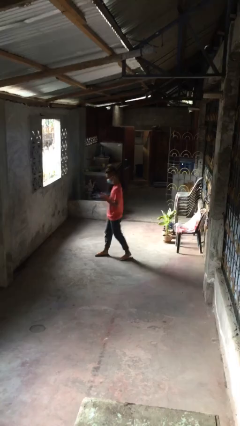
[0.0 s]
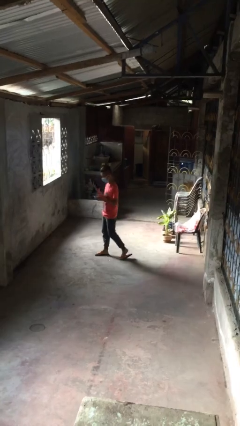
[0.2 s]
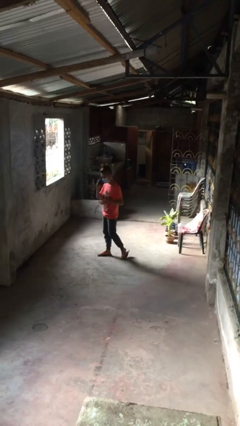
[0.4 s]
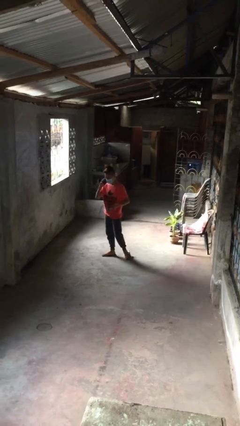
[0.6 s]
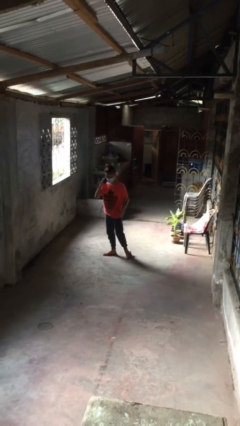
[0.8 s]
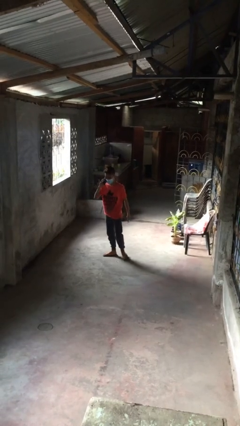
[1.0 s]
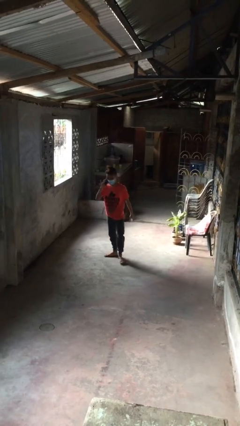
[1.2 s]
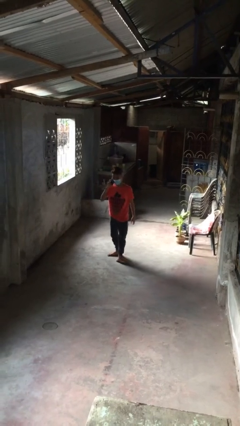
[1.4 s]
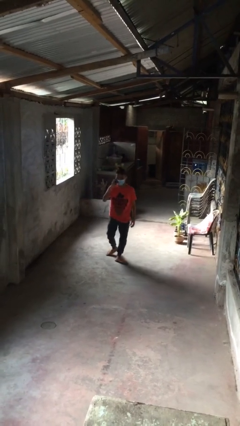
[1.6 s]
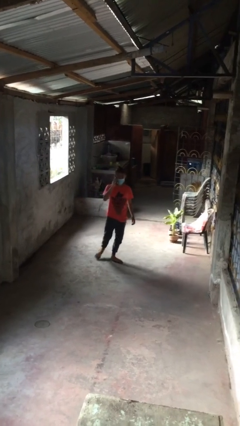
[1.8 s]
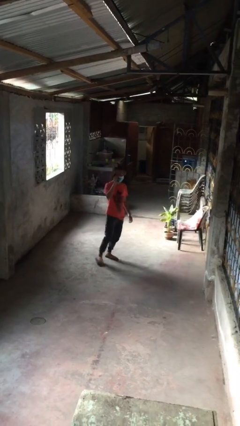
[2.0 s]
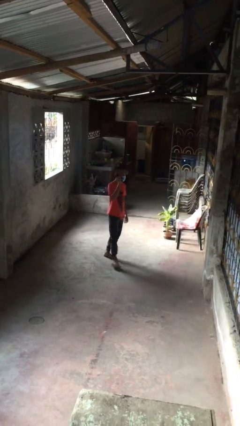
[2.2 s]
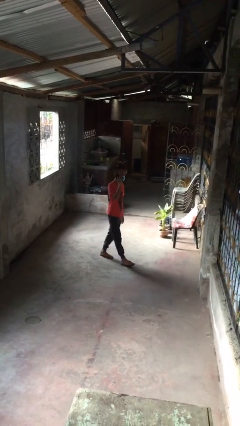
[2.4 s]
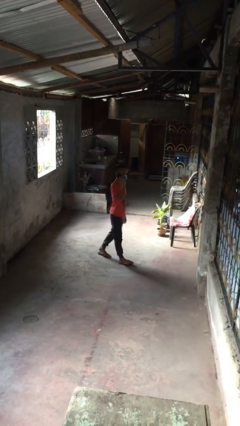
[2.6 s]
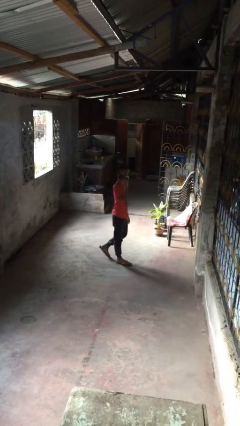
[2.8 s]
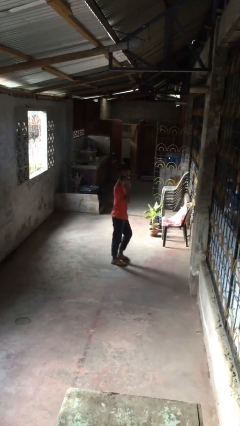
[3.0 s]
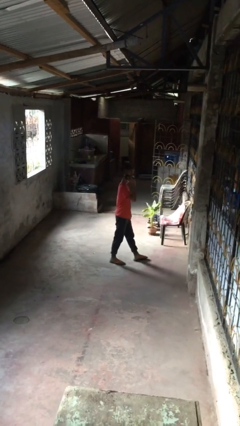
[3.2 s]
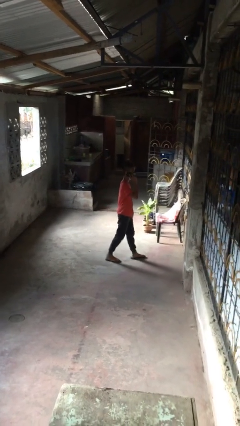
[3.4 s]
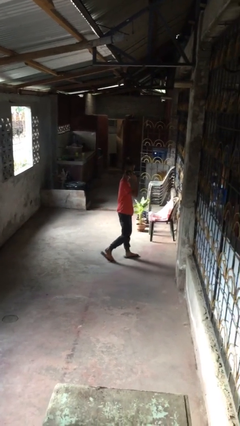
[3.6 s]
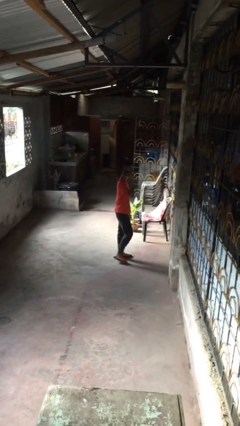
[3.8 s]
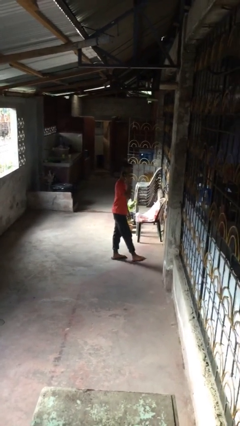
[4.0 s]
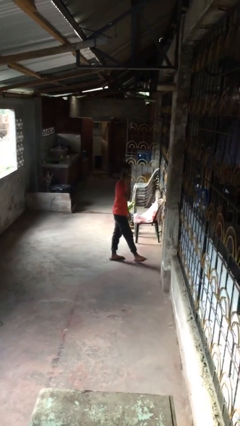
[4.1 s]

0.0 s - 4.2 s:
person talks on phone

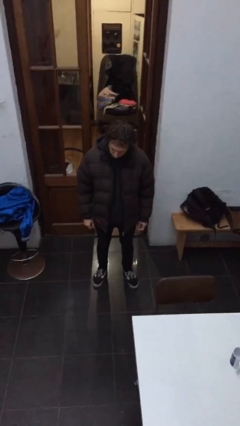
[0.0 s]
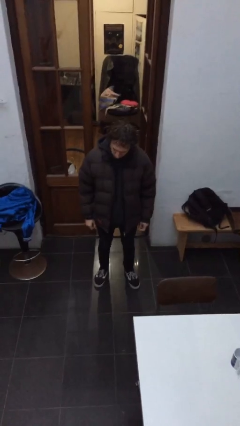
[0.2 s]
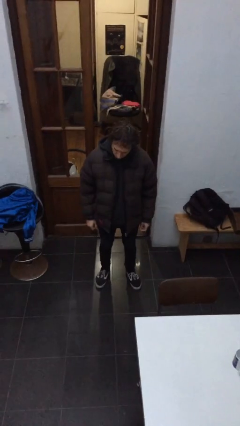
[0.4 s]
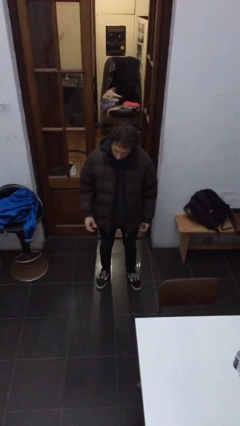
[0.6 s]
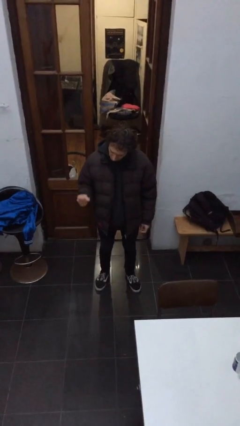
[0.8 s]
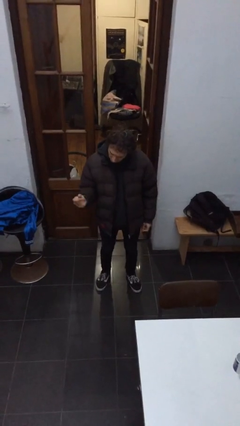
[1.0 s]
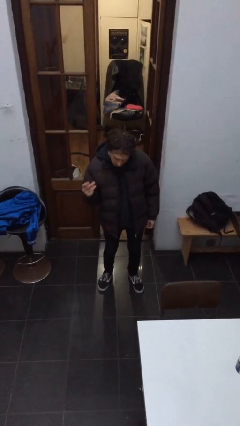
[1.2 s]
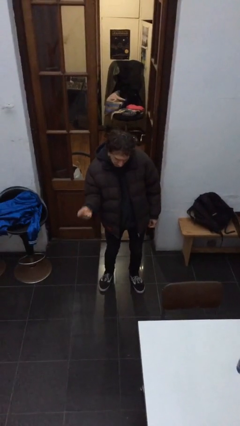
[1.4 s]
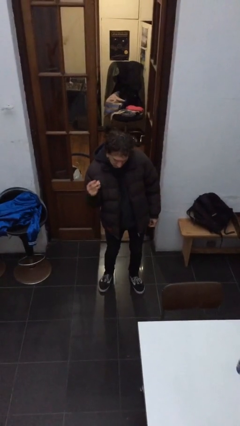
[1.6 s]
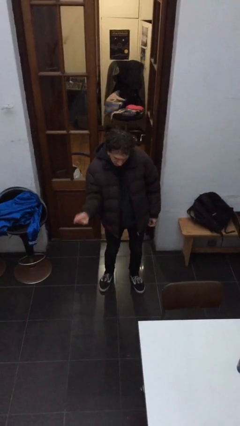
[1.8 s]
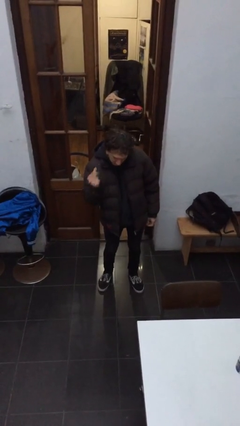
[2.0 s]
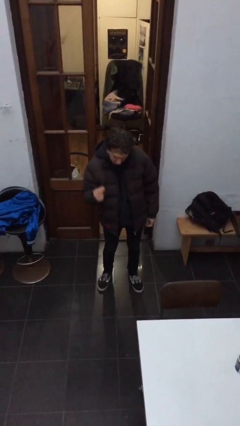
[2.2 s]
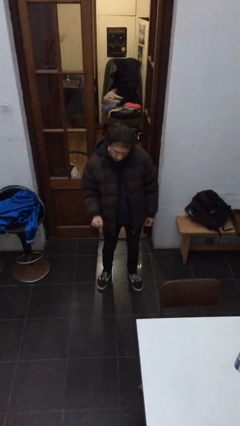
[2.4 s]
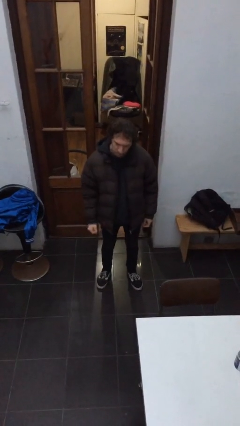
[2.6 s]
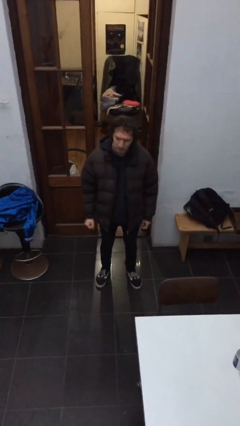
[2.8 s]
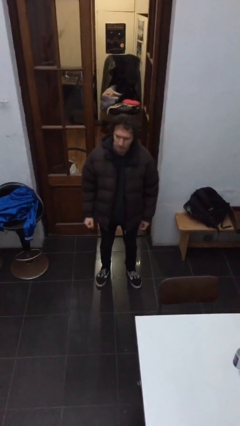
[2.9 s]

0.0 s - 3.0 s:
person snaps fingers

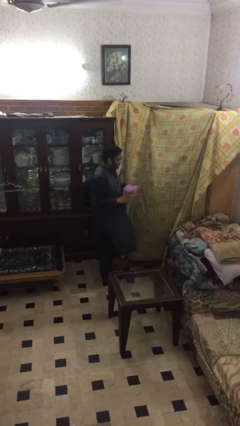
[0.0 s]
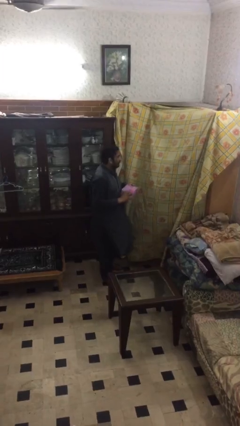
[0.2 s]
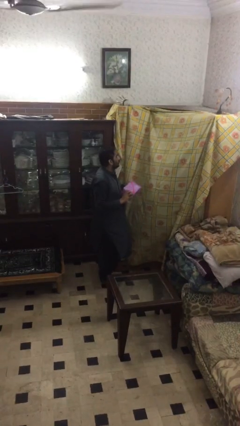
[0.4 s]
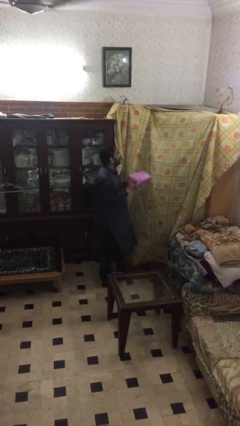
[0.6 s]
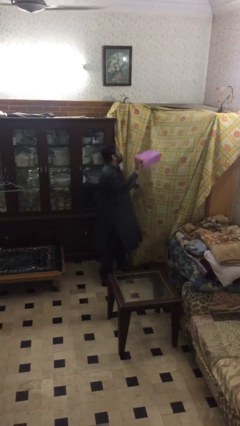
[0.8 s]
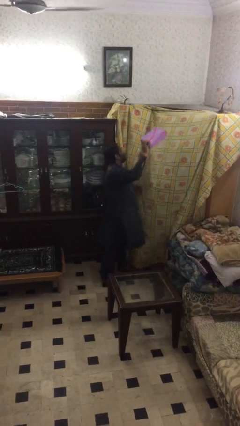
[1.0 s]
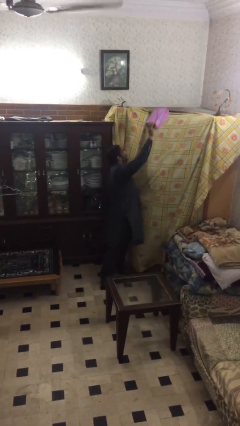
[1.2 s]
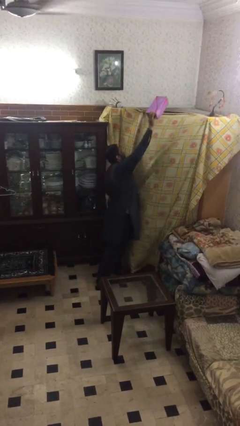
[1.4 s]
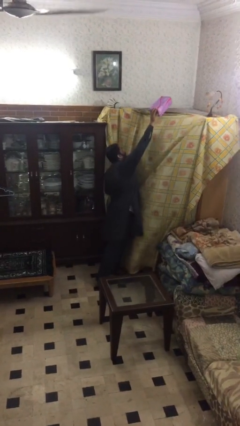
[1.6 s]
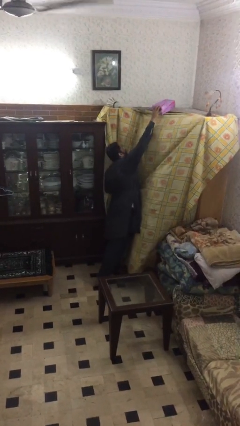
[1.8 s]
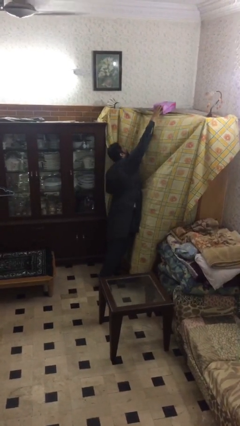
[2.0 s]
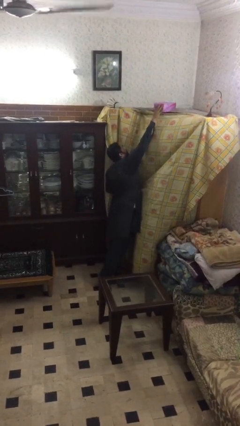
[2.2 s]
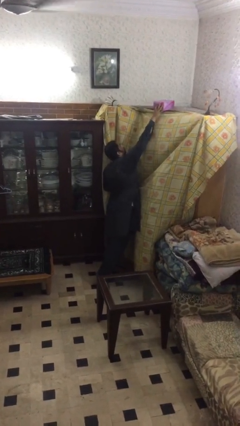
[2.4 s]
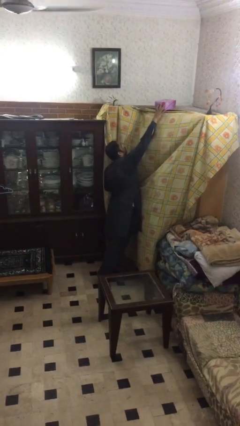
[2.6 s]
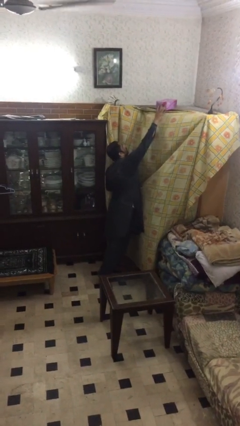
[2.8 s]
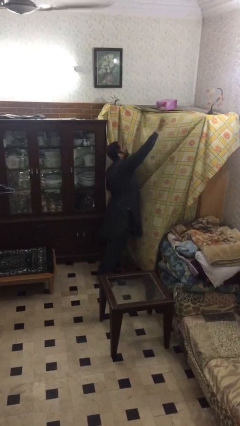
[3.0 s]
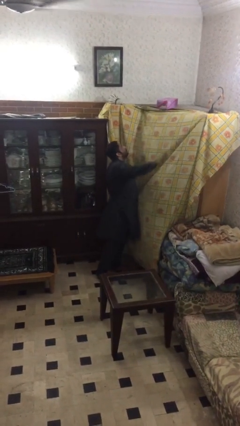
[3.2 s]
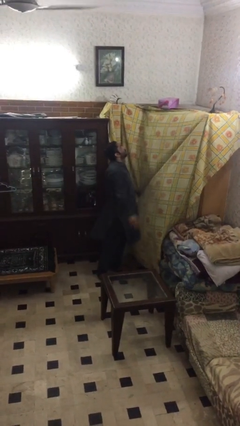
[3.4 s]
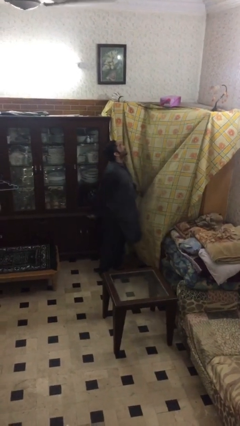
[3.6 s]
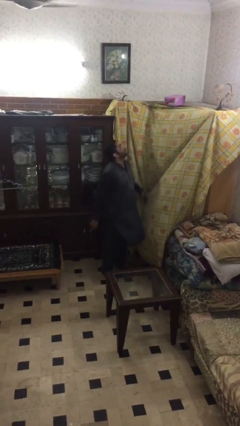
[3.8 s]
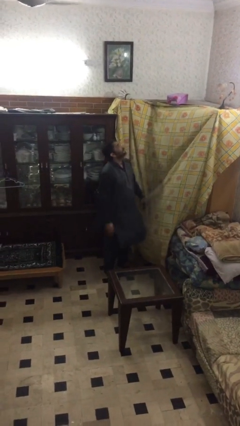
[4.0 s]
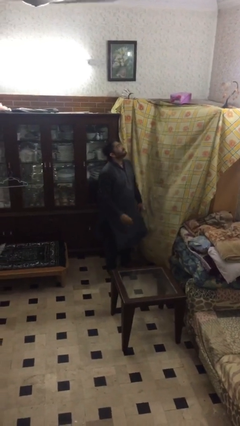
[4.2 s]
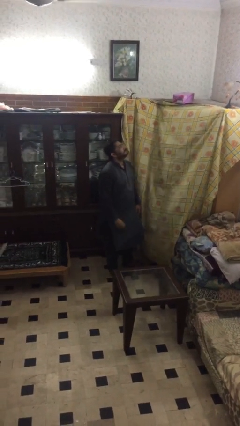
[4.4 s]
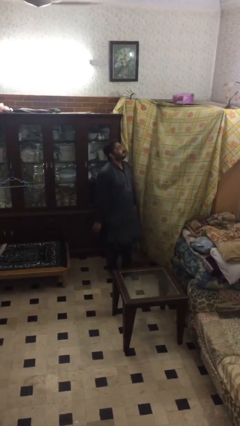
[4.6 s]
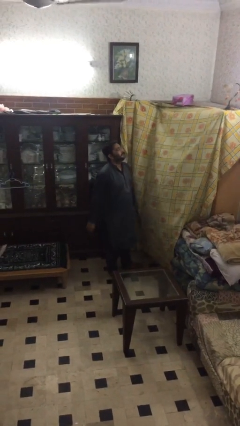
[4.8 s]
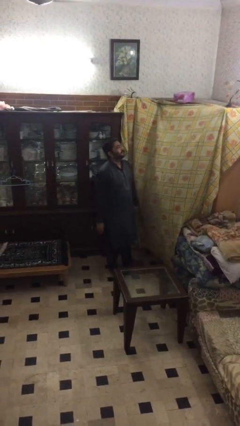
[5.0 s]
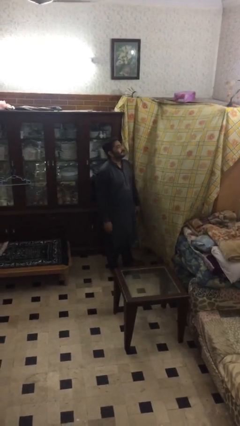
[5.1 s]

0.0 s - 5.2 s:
person puts down object on shelf

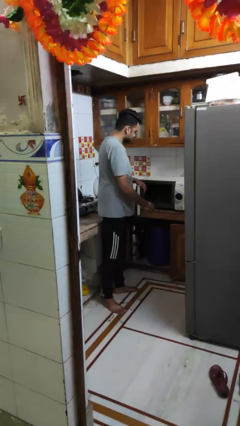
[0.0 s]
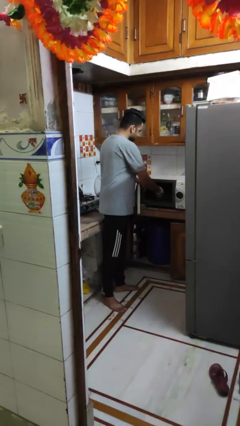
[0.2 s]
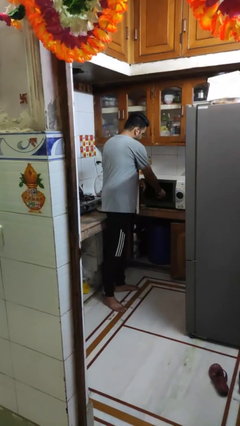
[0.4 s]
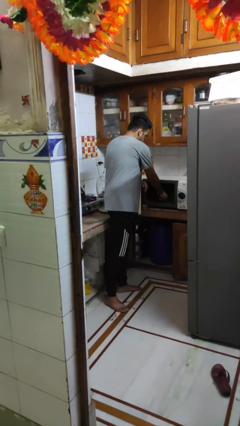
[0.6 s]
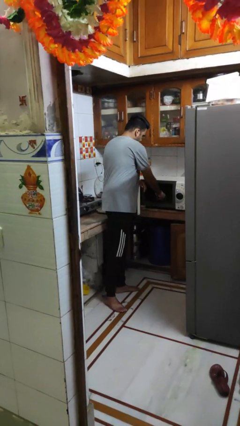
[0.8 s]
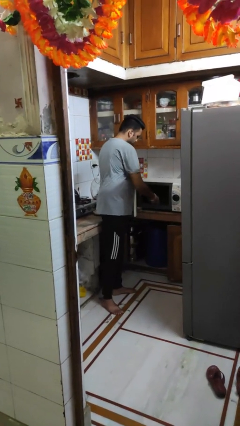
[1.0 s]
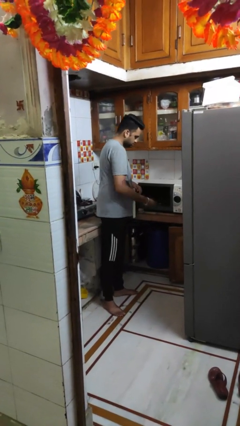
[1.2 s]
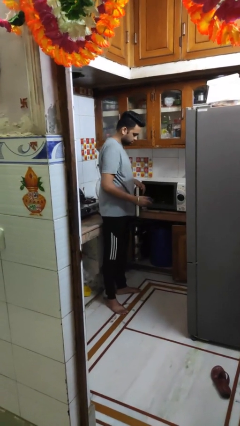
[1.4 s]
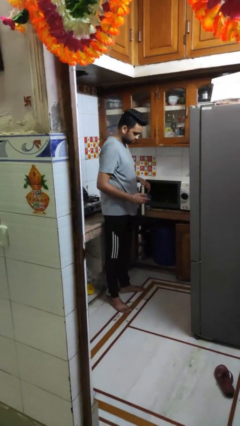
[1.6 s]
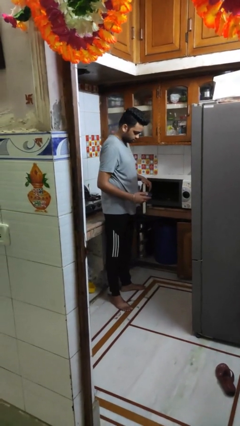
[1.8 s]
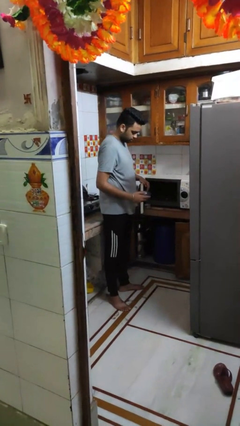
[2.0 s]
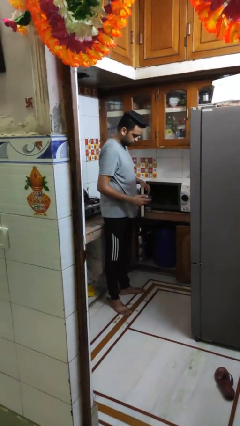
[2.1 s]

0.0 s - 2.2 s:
person takes object from microwave

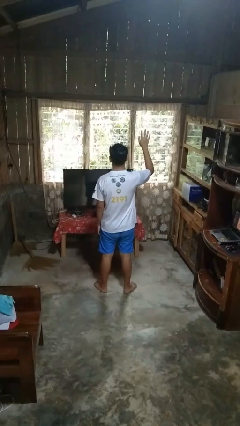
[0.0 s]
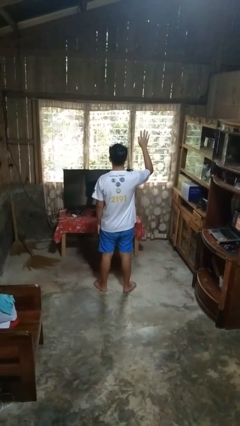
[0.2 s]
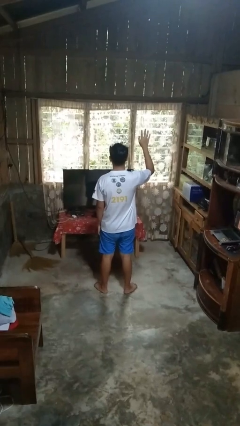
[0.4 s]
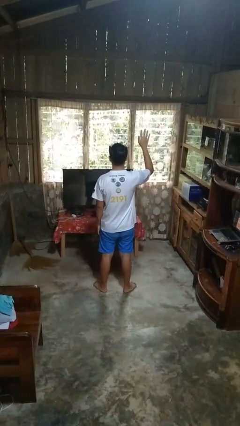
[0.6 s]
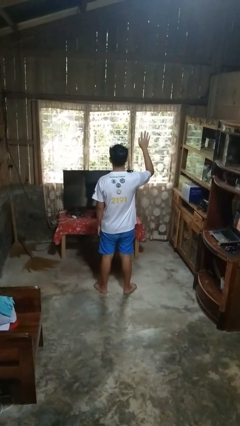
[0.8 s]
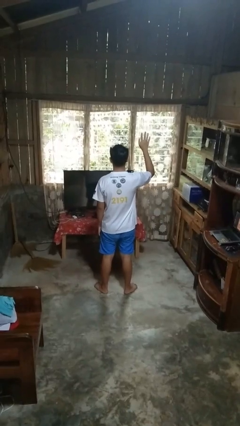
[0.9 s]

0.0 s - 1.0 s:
person gestures lower hand

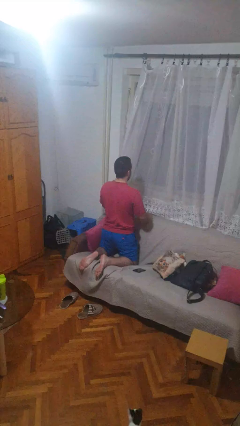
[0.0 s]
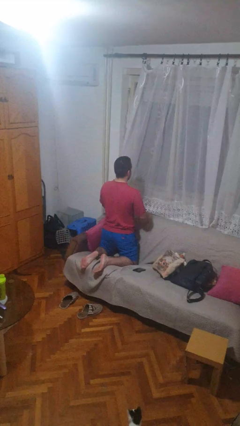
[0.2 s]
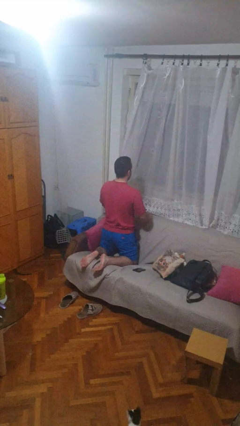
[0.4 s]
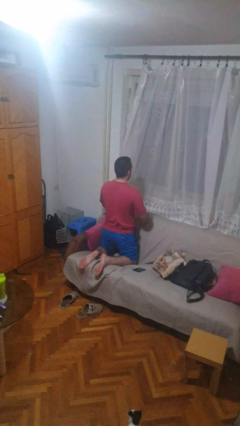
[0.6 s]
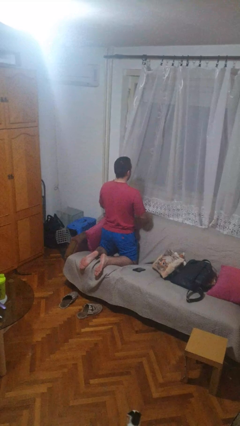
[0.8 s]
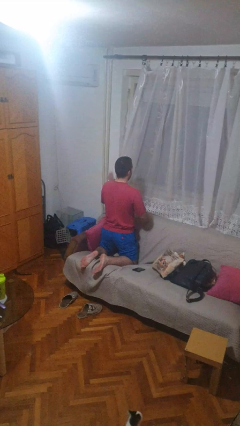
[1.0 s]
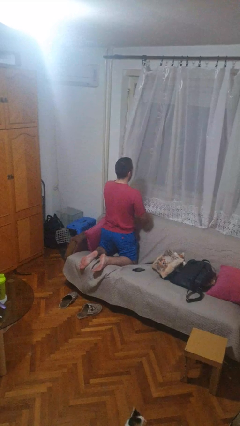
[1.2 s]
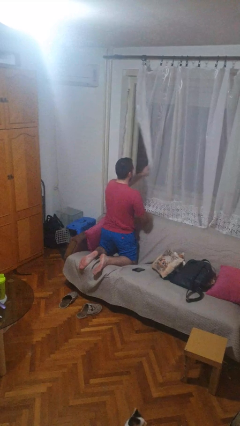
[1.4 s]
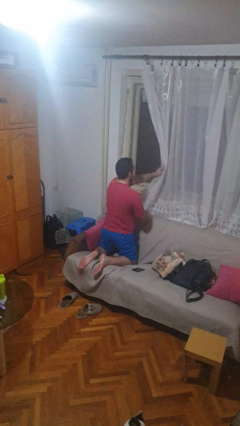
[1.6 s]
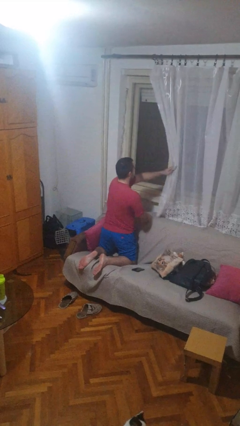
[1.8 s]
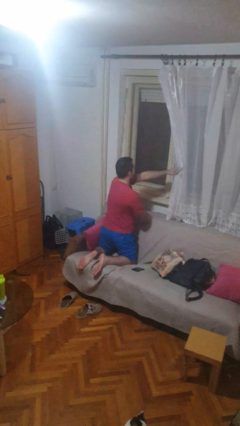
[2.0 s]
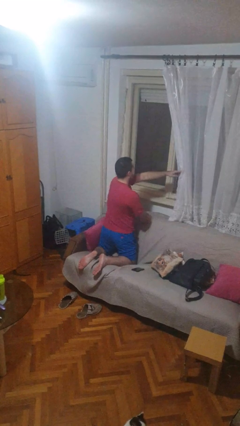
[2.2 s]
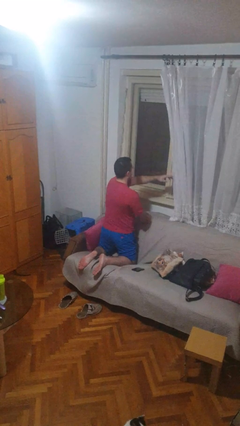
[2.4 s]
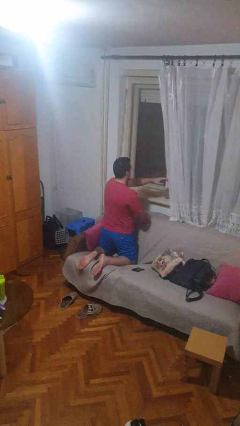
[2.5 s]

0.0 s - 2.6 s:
person opens curtains
